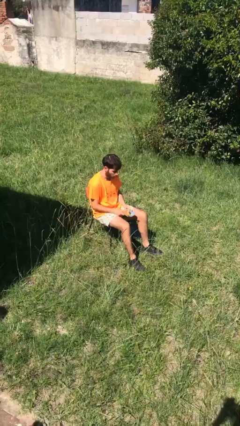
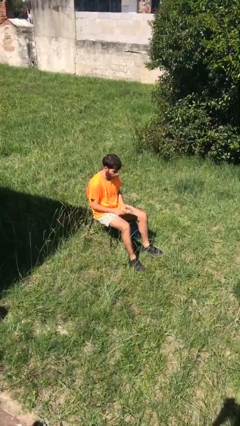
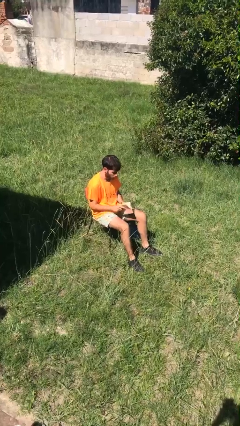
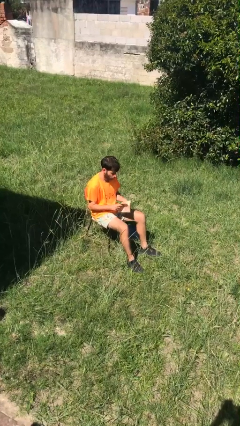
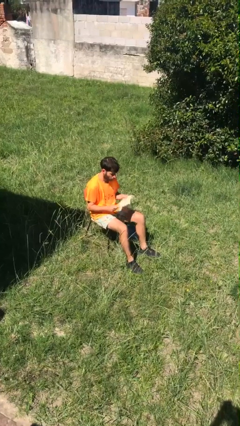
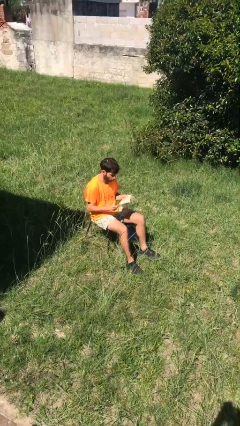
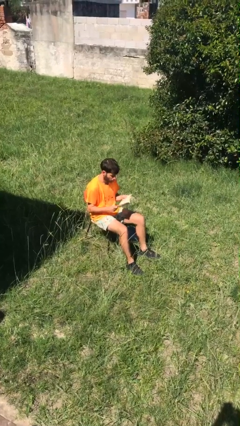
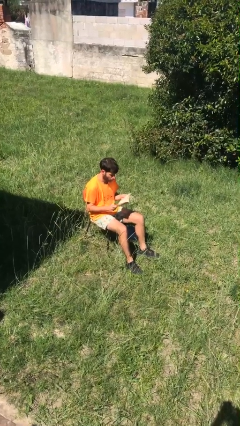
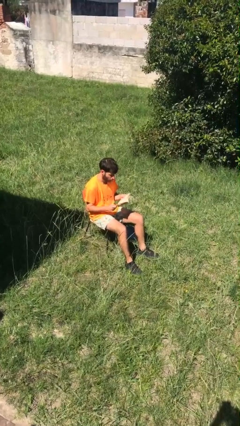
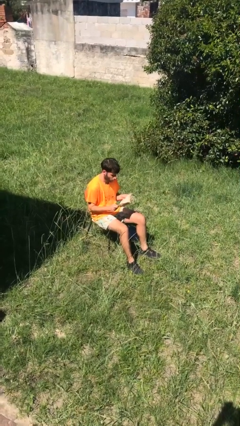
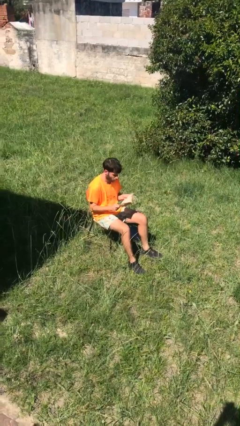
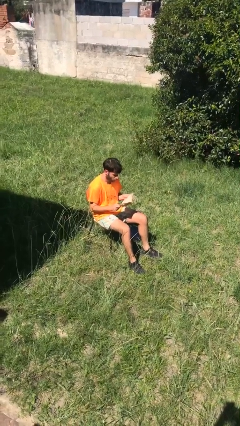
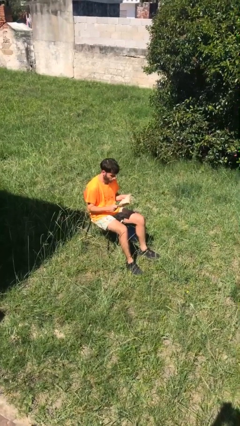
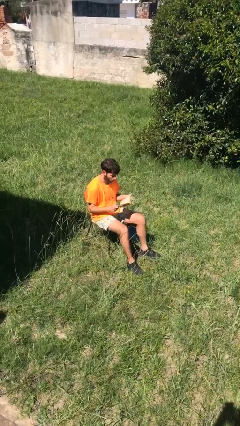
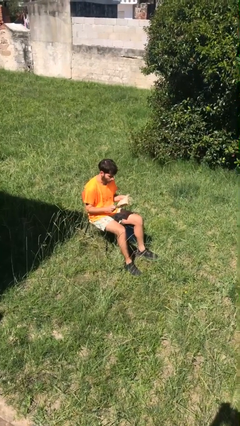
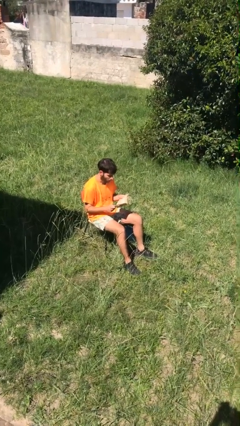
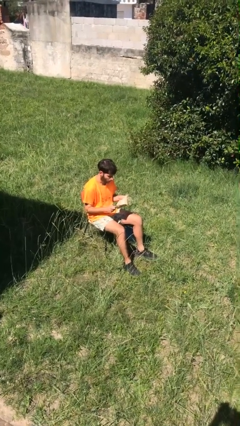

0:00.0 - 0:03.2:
person reads document

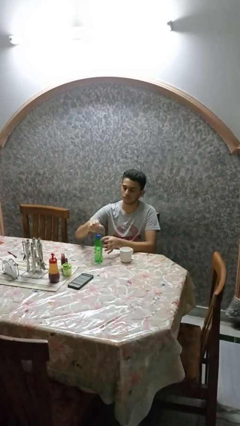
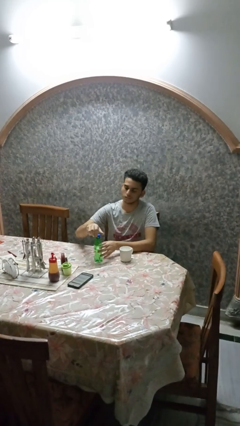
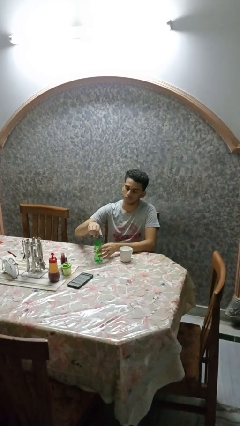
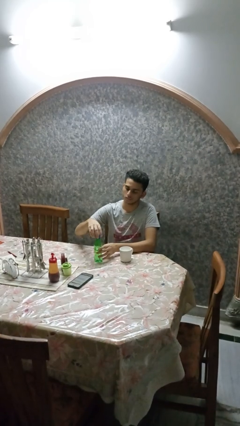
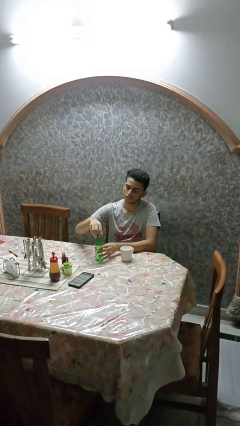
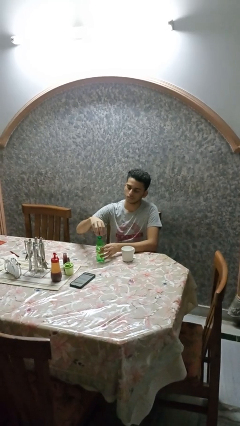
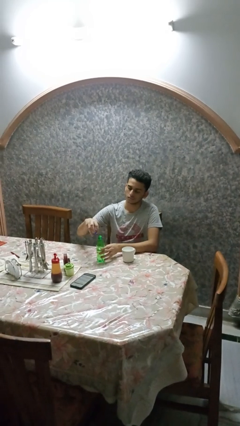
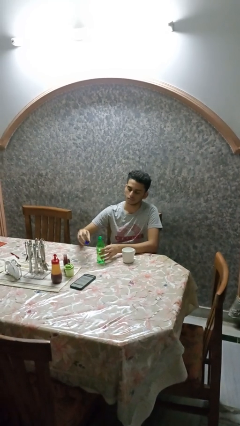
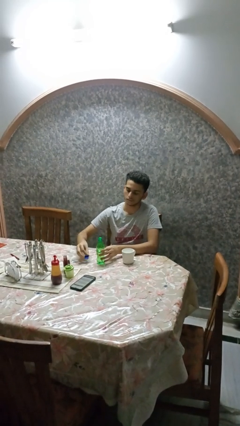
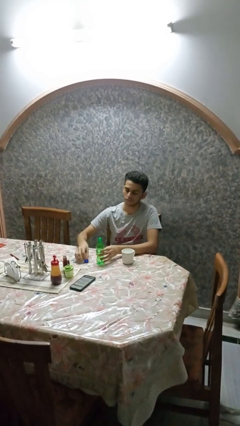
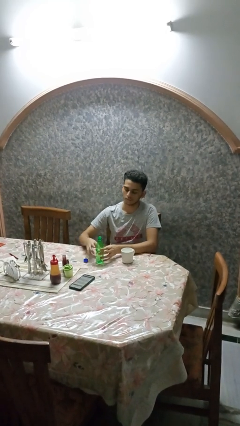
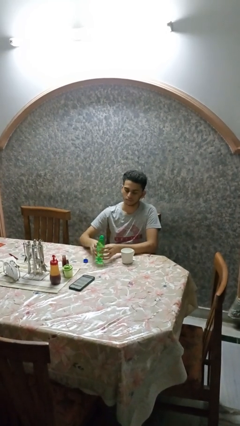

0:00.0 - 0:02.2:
person unscrews lid from bottle

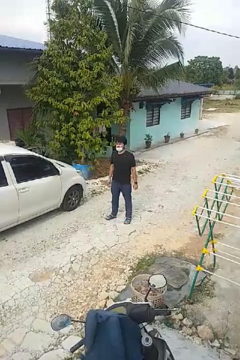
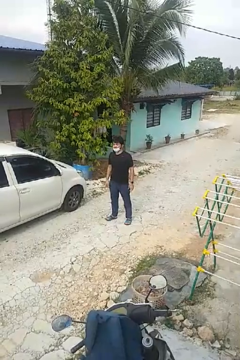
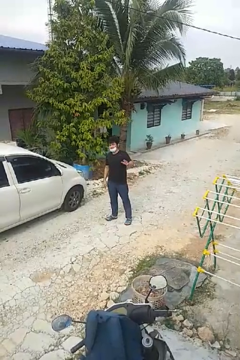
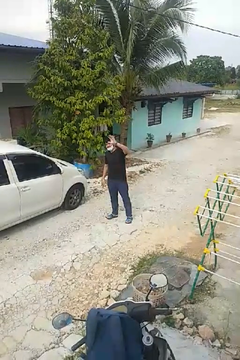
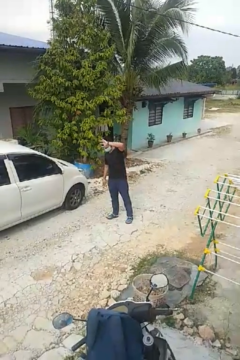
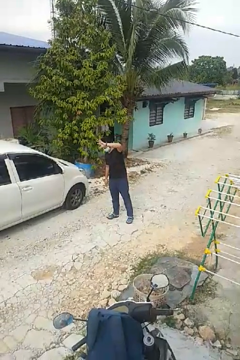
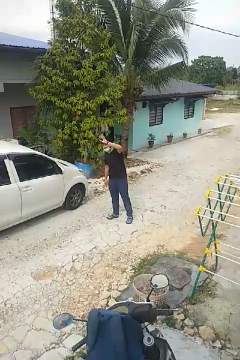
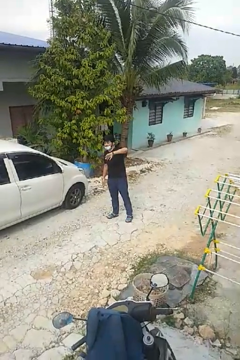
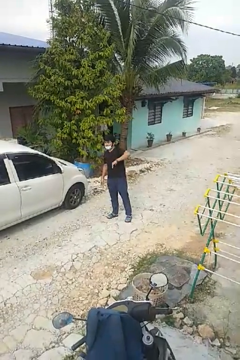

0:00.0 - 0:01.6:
person waves at person

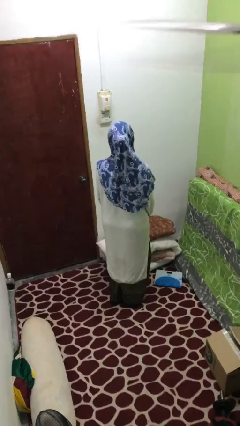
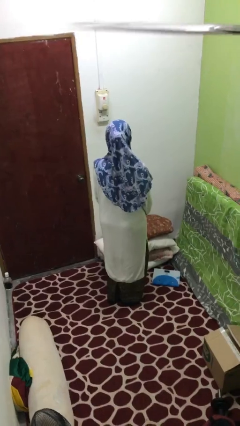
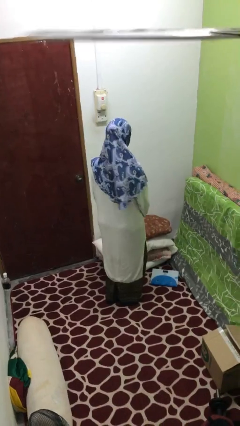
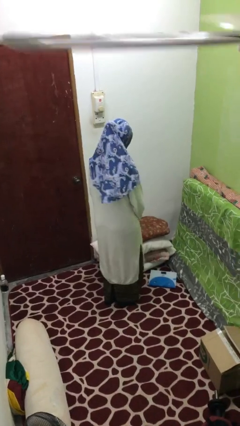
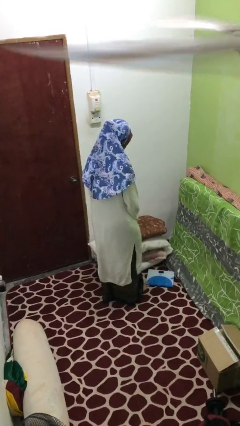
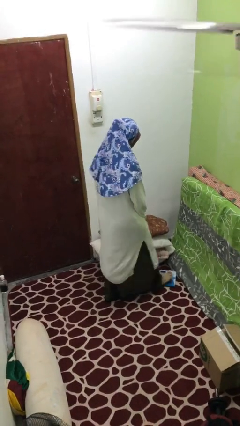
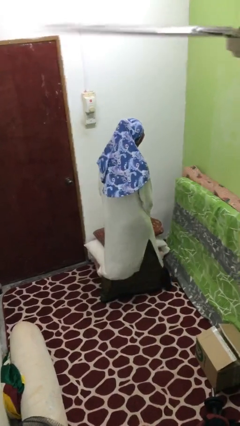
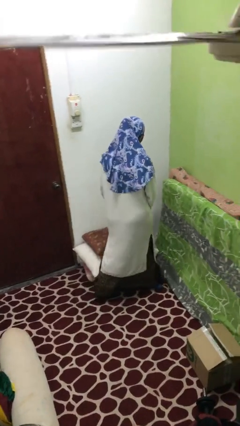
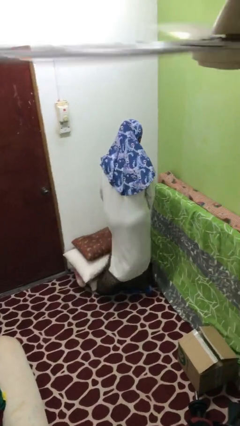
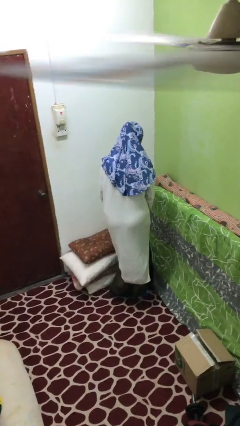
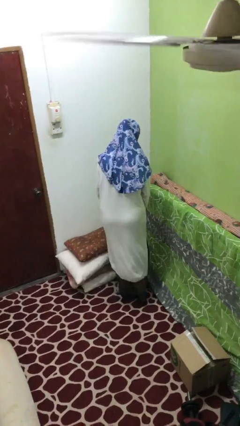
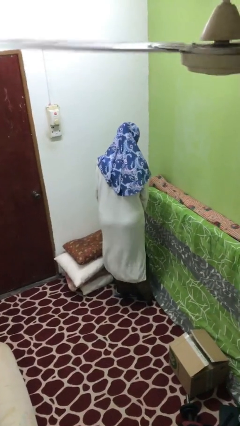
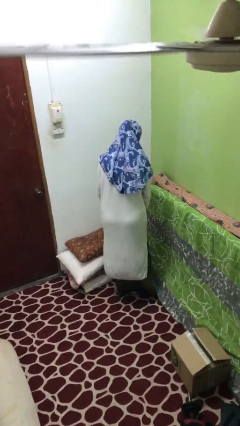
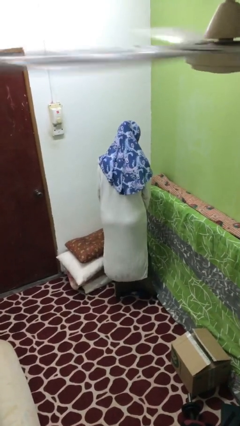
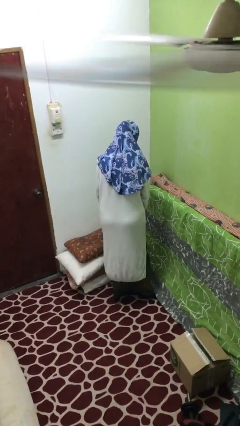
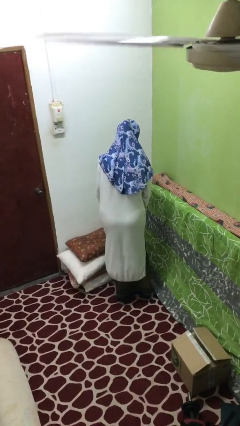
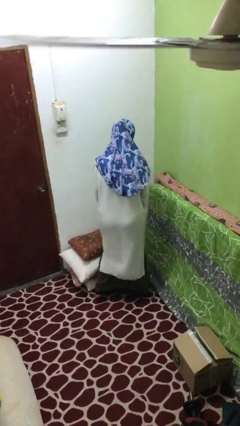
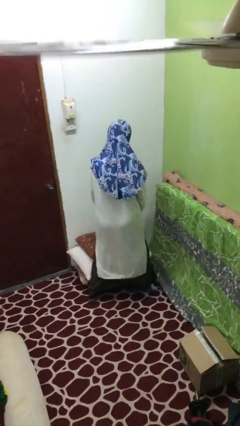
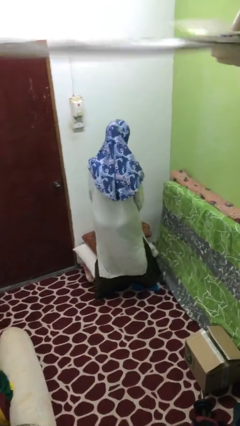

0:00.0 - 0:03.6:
person uses bodyweight scale

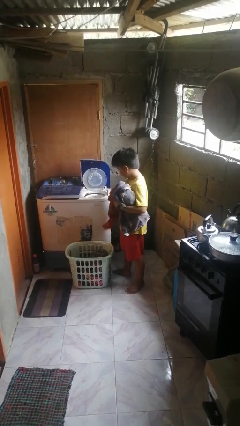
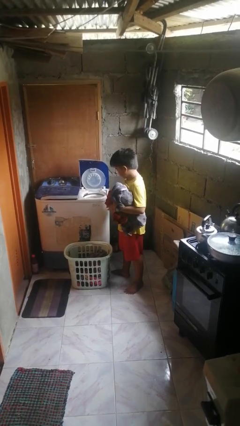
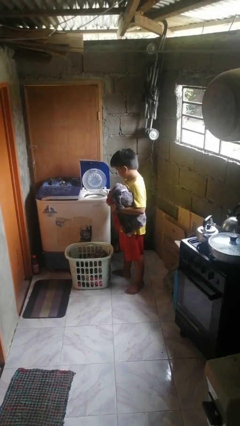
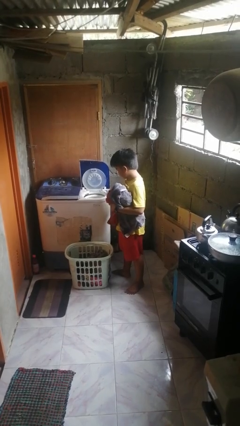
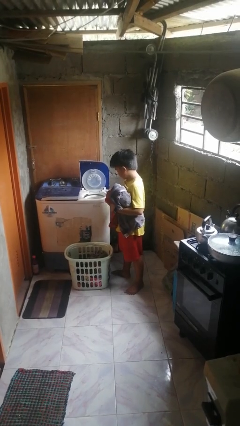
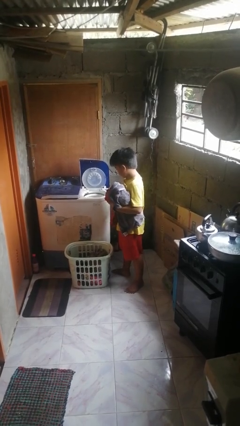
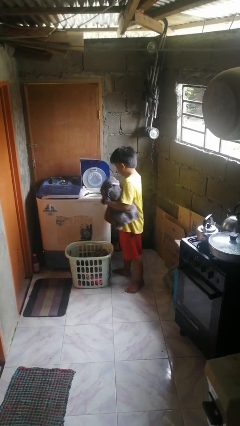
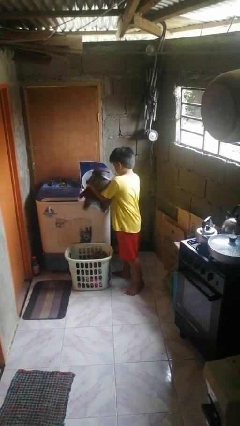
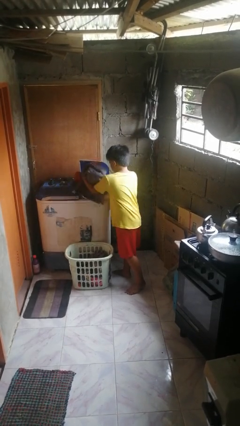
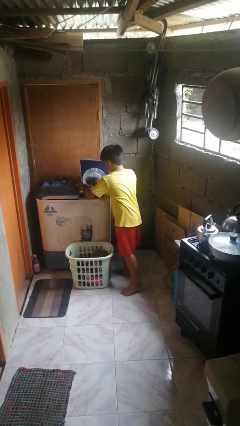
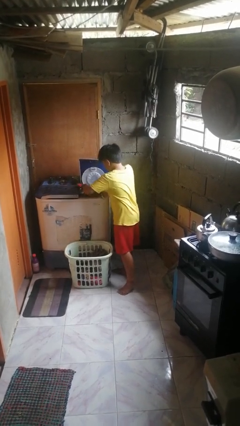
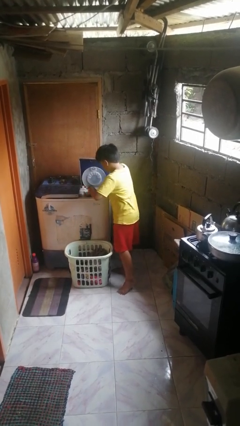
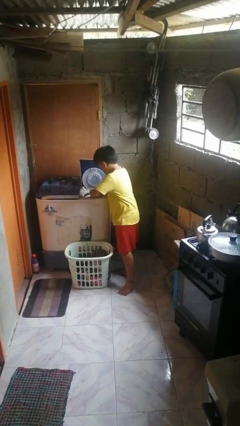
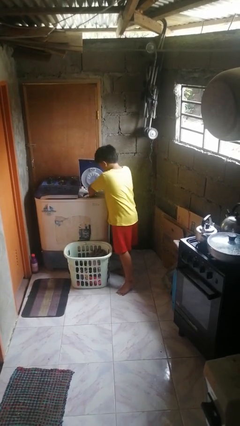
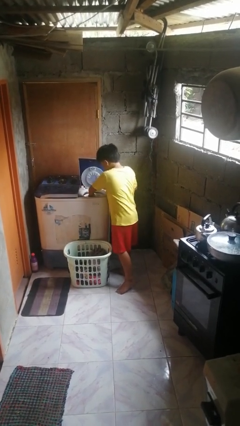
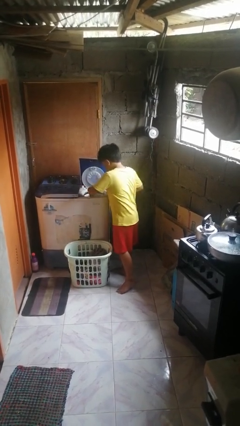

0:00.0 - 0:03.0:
person loads dryer

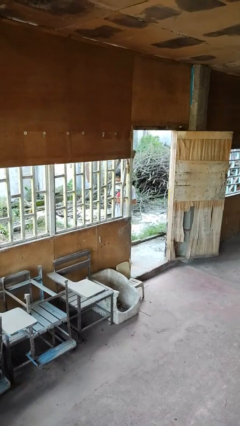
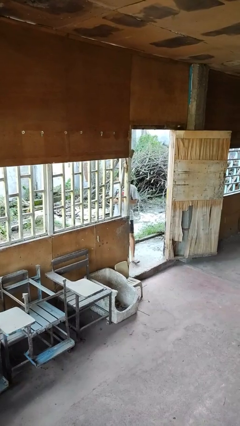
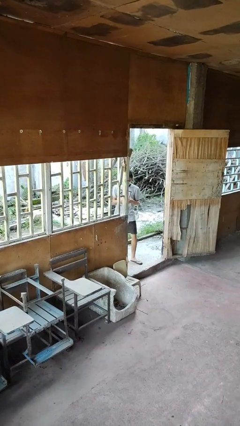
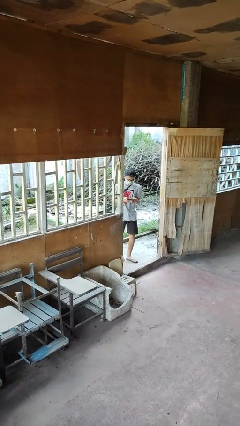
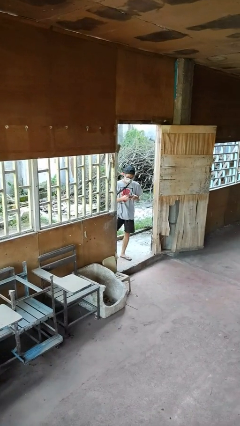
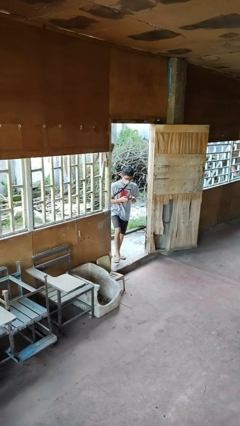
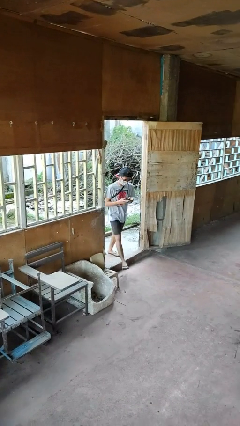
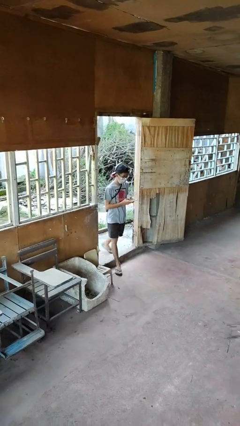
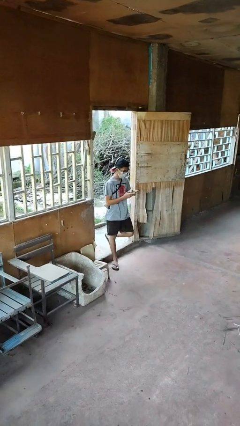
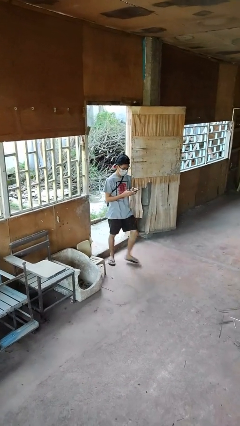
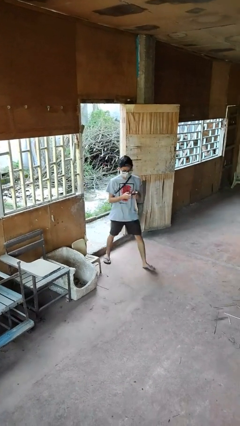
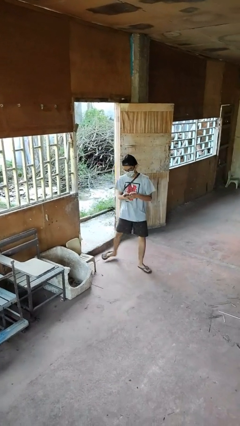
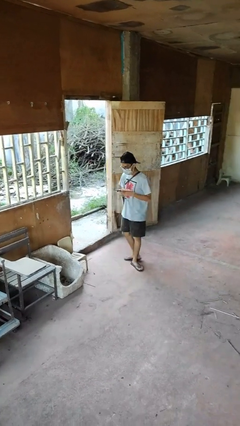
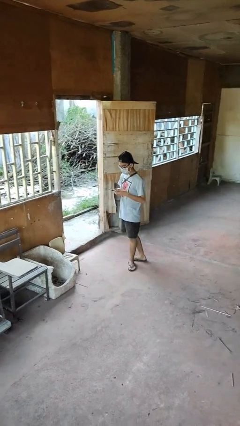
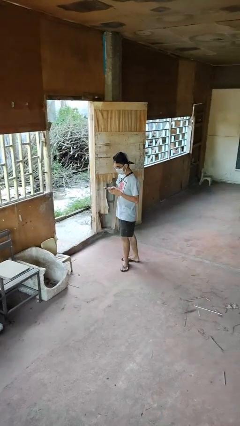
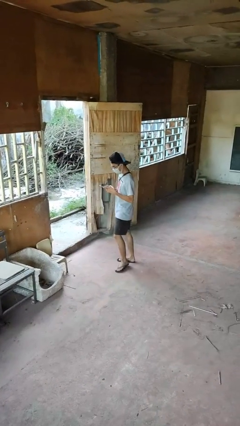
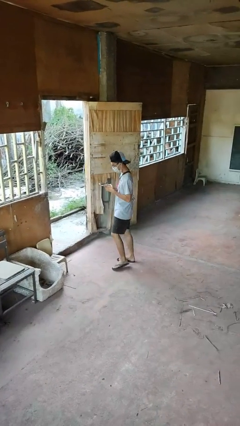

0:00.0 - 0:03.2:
person enters scene through structure

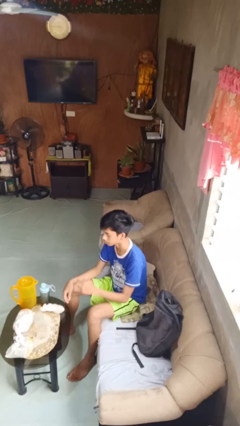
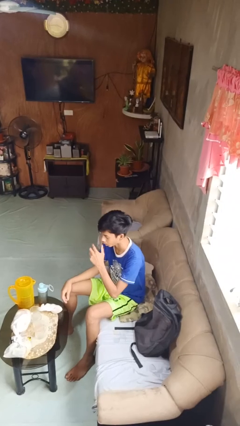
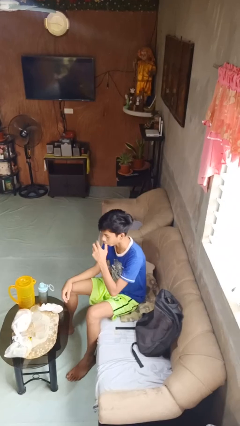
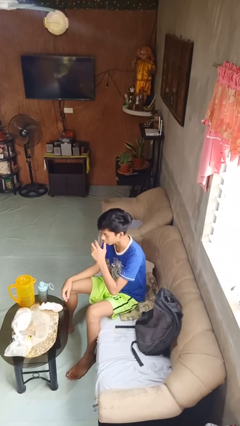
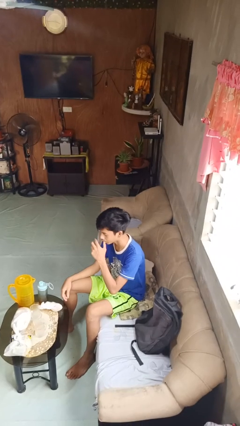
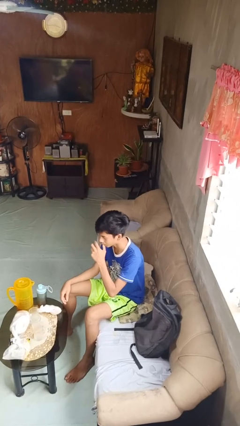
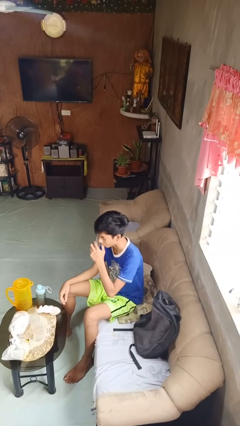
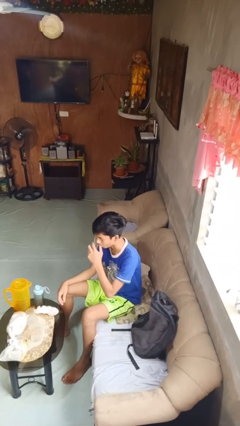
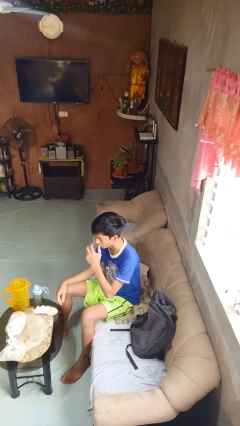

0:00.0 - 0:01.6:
person licks fingers
